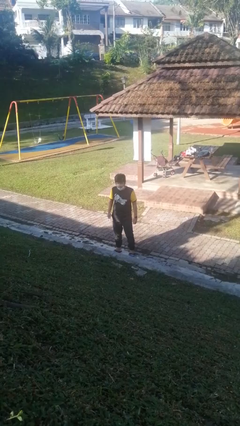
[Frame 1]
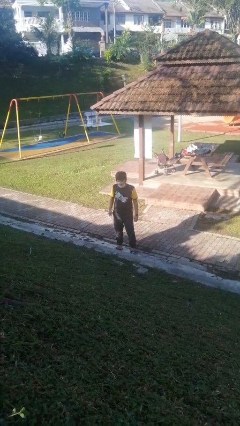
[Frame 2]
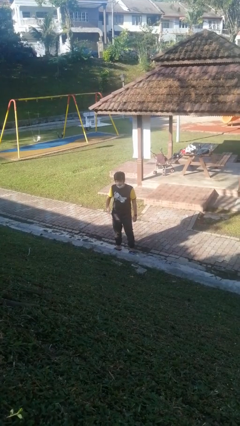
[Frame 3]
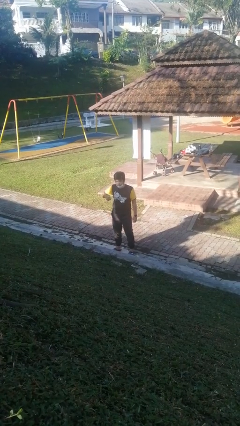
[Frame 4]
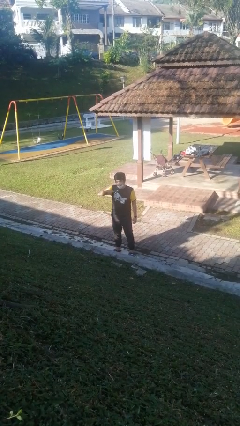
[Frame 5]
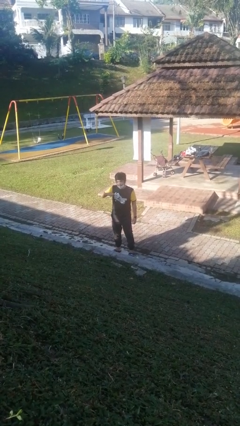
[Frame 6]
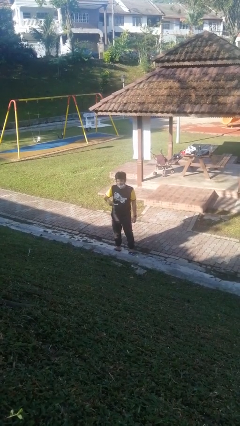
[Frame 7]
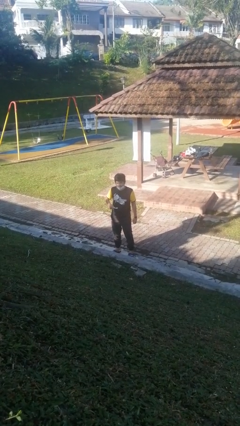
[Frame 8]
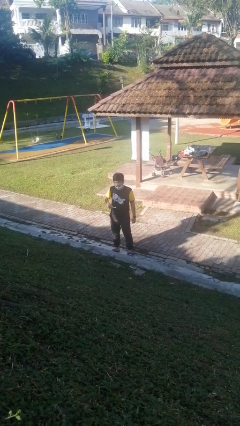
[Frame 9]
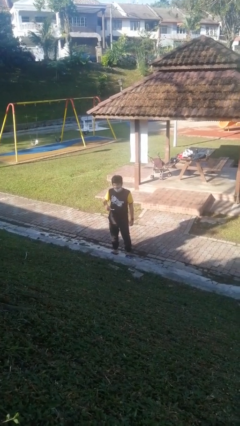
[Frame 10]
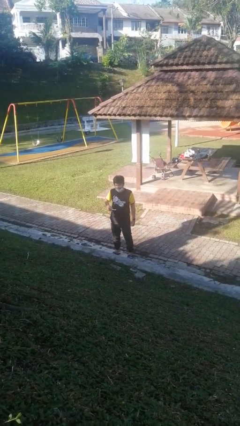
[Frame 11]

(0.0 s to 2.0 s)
person brushes teeth

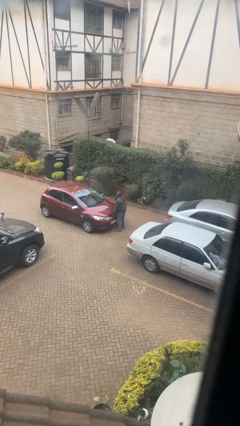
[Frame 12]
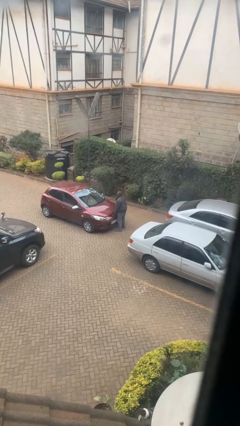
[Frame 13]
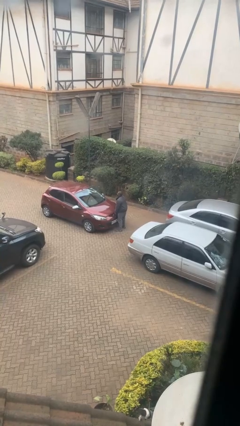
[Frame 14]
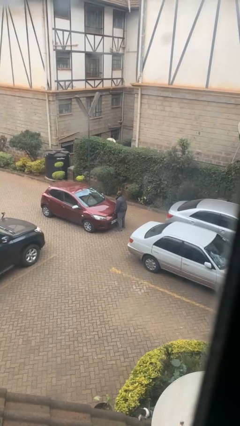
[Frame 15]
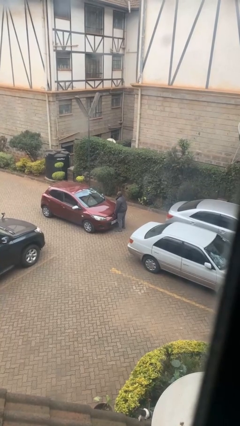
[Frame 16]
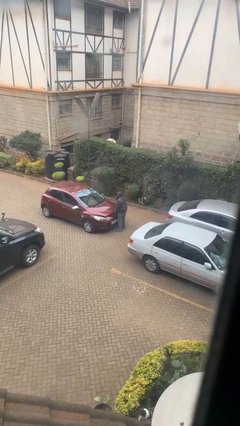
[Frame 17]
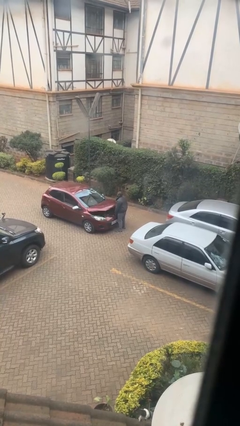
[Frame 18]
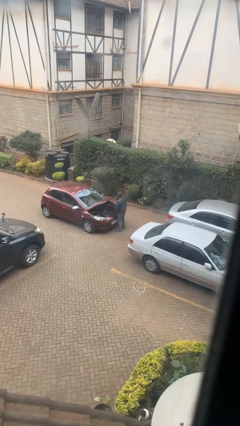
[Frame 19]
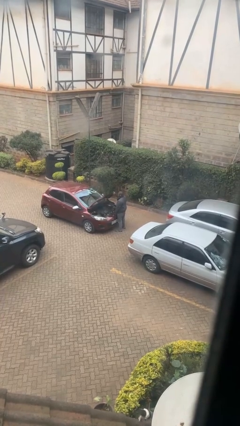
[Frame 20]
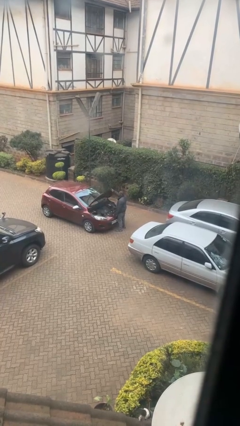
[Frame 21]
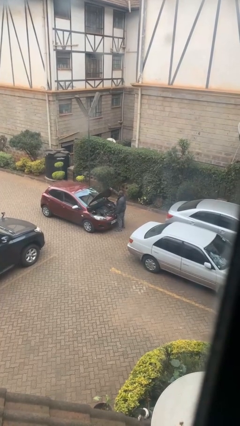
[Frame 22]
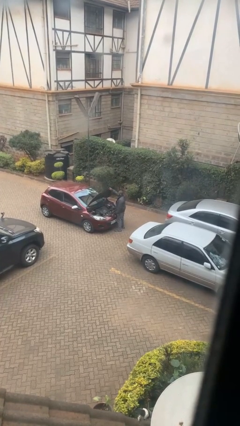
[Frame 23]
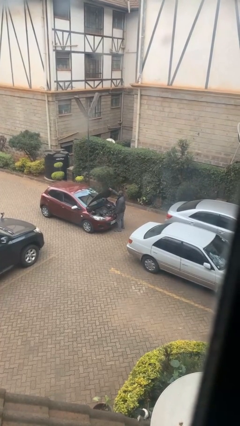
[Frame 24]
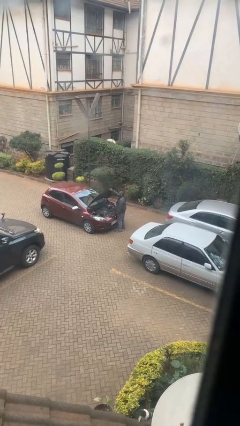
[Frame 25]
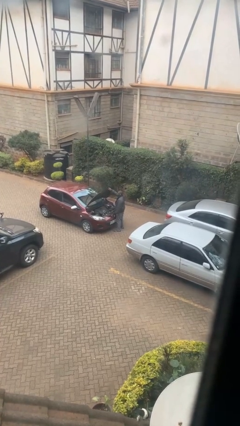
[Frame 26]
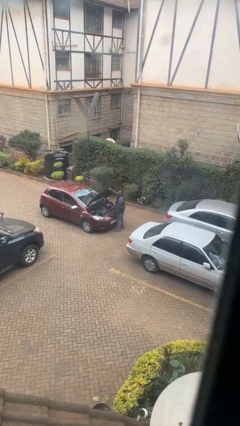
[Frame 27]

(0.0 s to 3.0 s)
person opens car hood

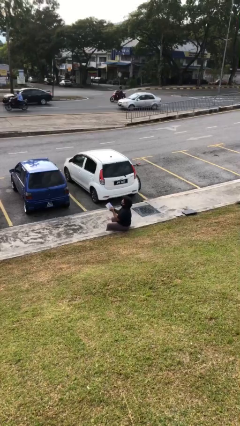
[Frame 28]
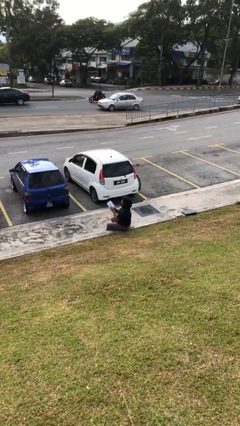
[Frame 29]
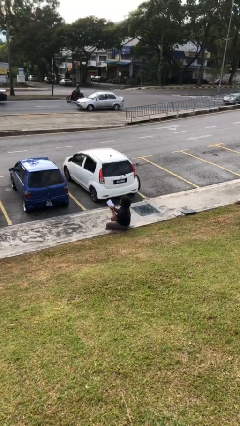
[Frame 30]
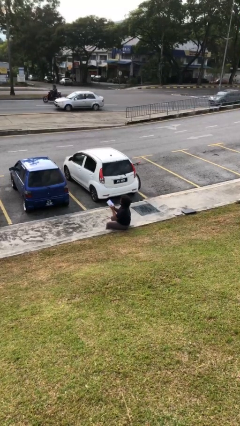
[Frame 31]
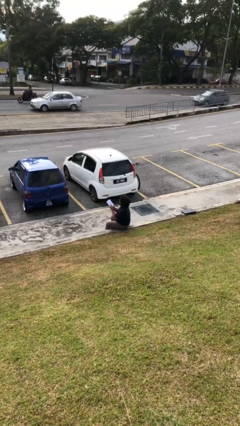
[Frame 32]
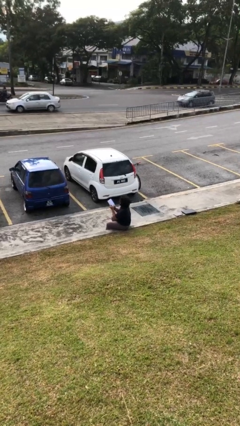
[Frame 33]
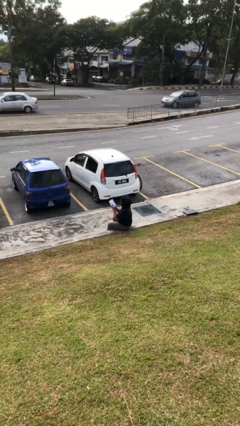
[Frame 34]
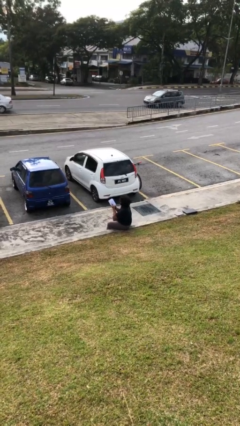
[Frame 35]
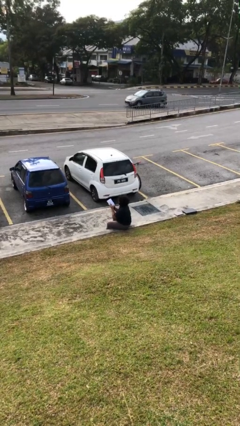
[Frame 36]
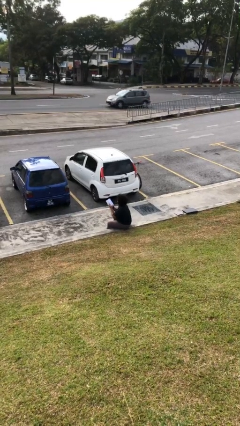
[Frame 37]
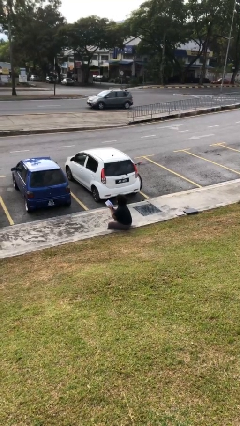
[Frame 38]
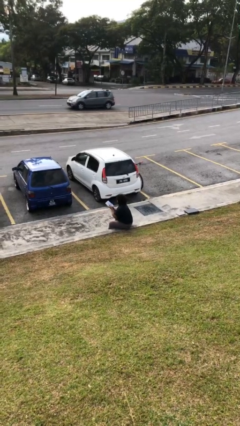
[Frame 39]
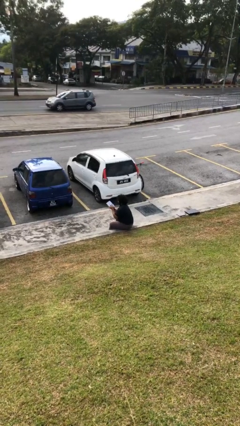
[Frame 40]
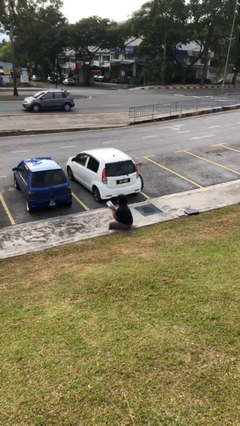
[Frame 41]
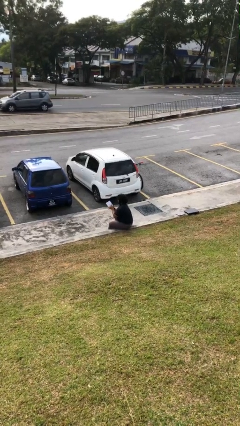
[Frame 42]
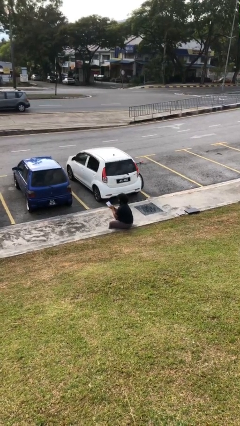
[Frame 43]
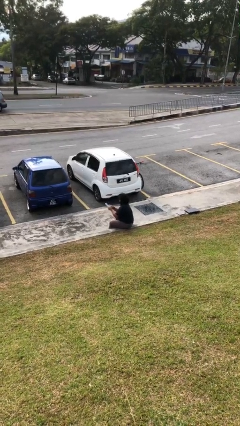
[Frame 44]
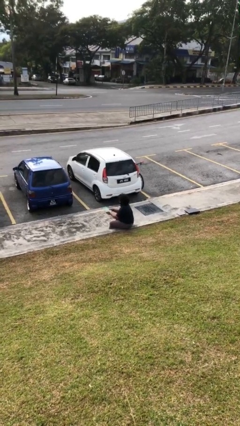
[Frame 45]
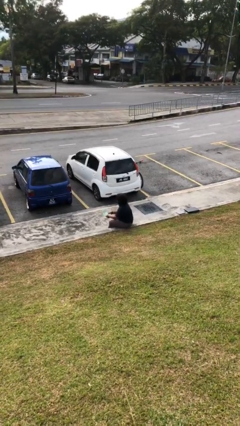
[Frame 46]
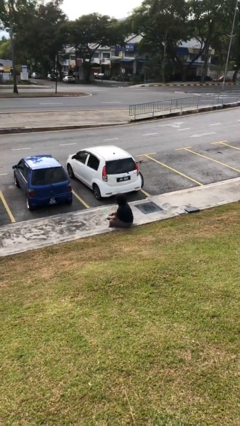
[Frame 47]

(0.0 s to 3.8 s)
person reads document

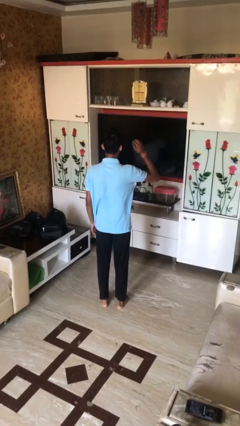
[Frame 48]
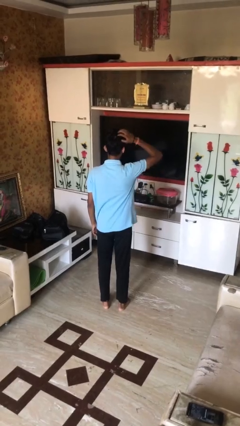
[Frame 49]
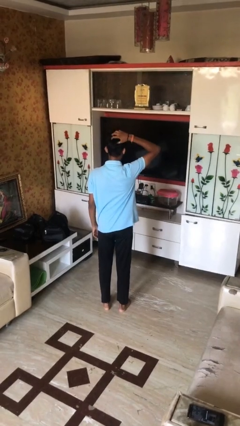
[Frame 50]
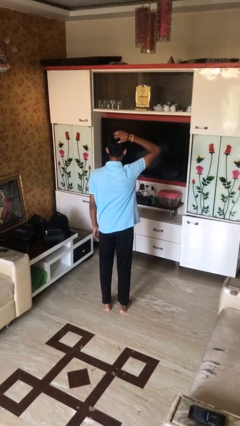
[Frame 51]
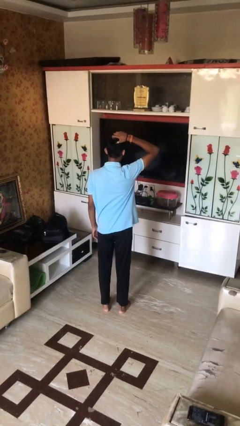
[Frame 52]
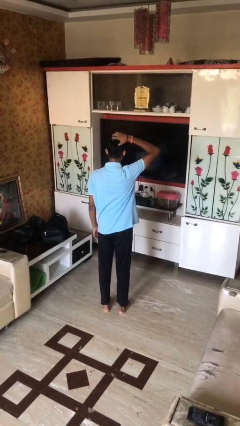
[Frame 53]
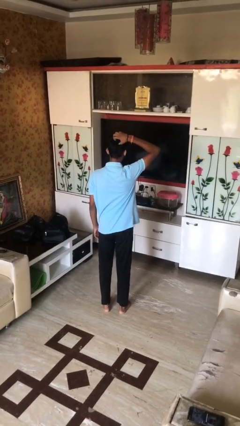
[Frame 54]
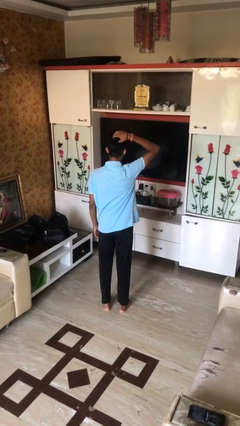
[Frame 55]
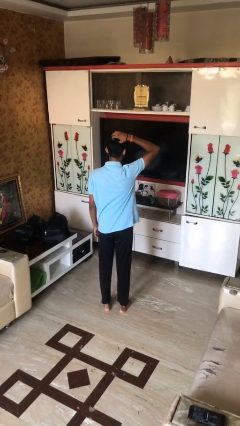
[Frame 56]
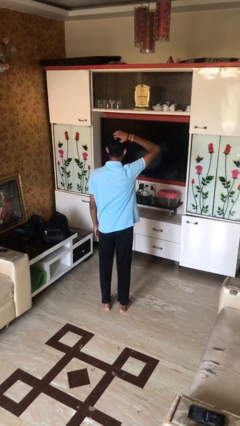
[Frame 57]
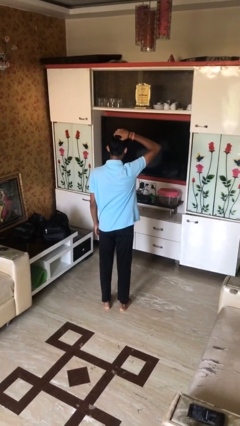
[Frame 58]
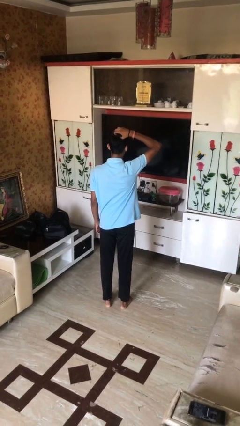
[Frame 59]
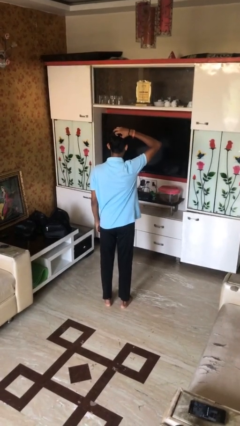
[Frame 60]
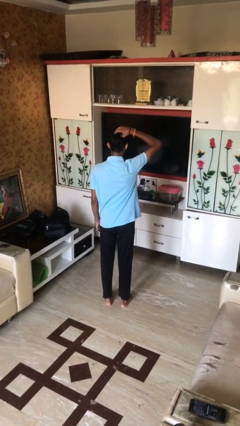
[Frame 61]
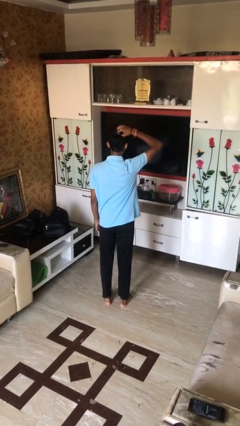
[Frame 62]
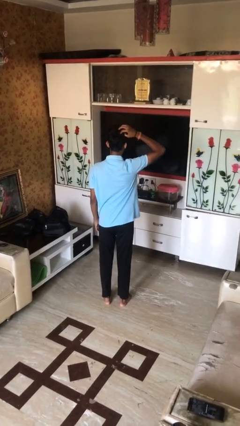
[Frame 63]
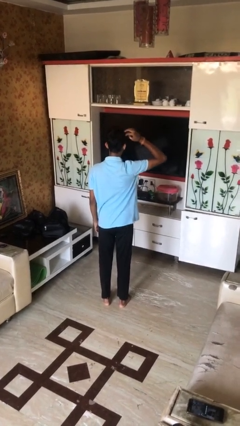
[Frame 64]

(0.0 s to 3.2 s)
person scratches face

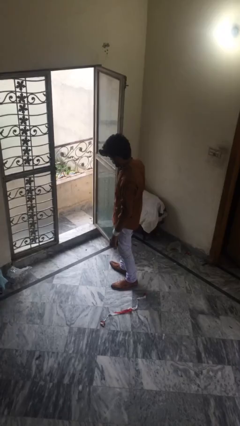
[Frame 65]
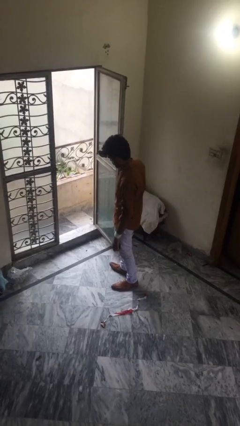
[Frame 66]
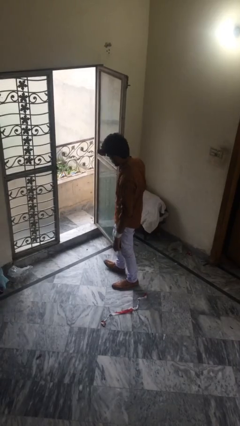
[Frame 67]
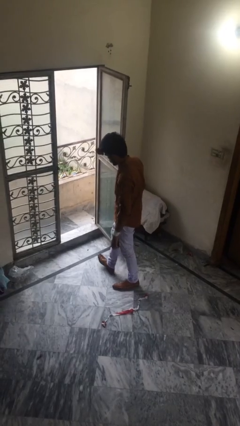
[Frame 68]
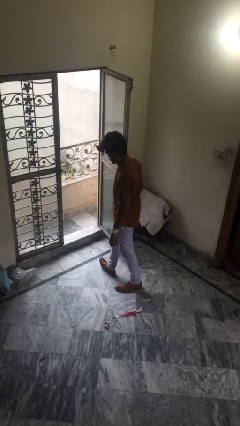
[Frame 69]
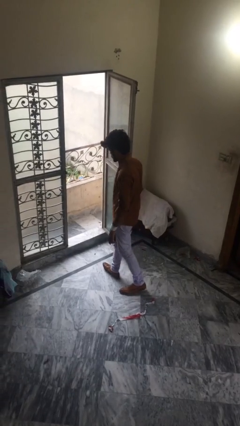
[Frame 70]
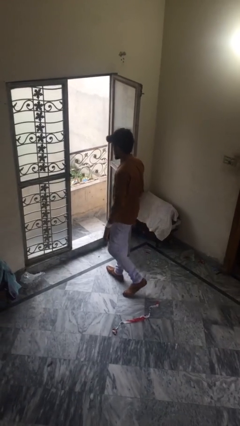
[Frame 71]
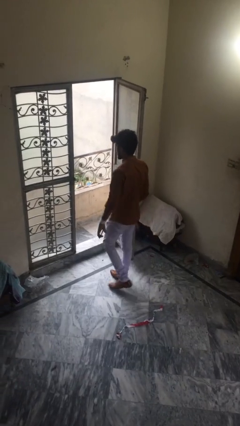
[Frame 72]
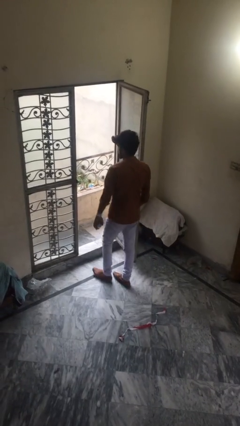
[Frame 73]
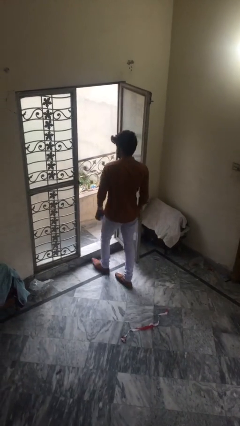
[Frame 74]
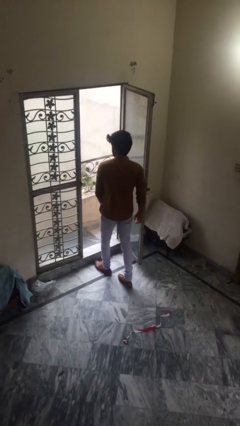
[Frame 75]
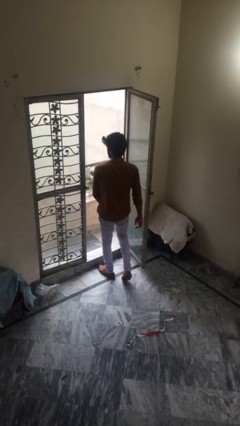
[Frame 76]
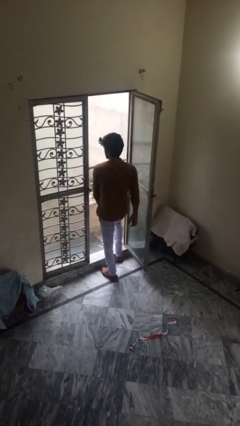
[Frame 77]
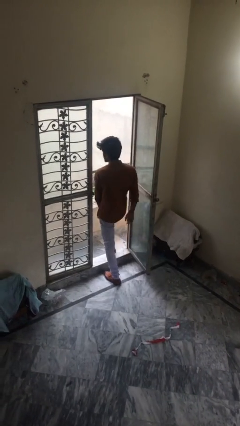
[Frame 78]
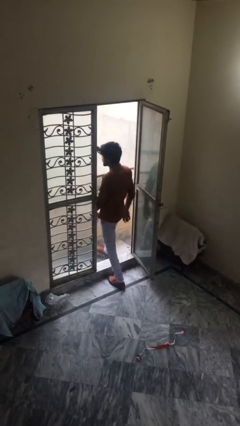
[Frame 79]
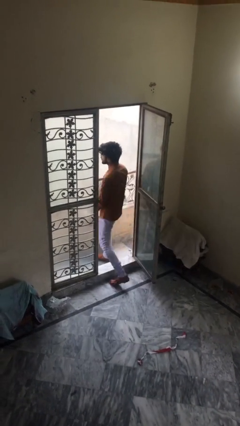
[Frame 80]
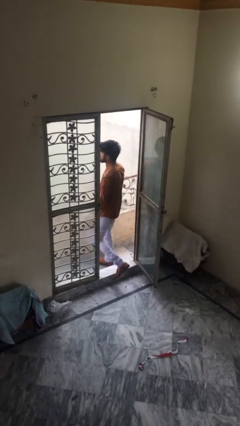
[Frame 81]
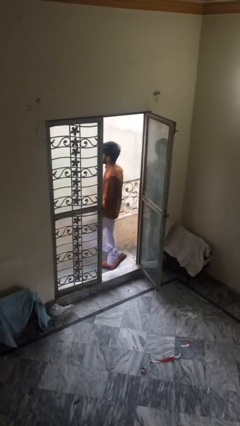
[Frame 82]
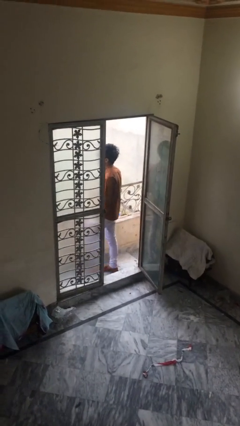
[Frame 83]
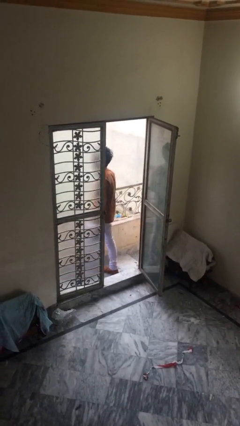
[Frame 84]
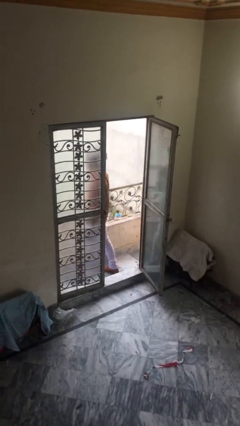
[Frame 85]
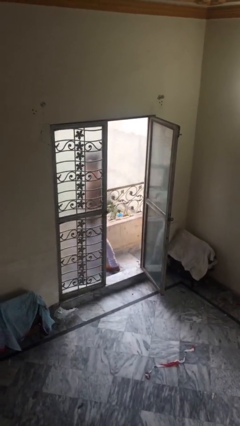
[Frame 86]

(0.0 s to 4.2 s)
person exits scene through structure

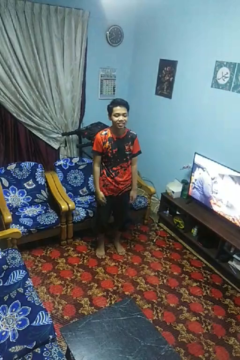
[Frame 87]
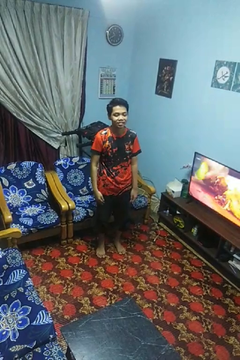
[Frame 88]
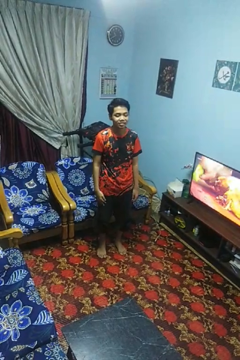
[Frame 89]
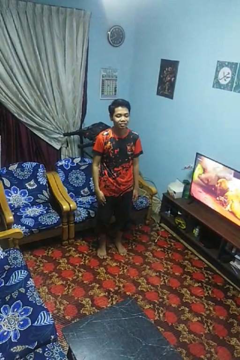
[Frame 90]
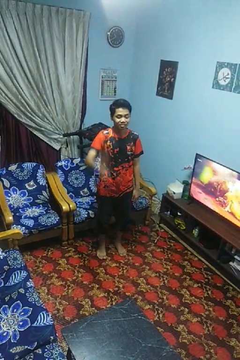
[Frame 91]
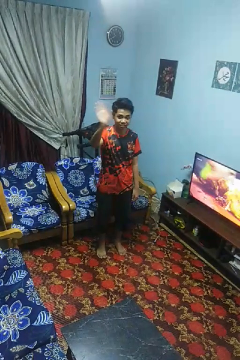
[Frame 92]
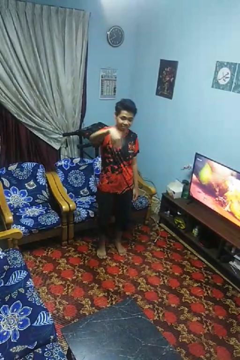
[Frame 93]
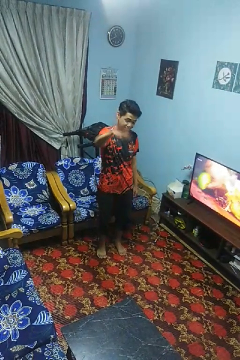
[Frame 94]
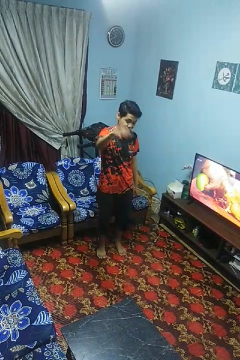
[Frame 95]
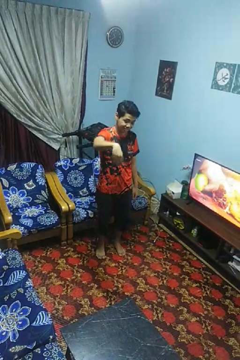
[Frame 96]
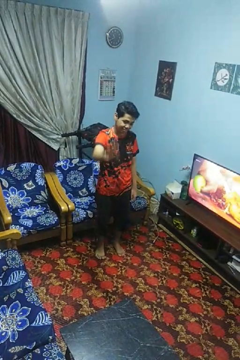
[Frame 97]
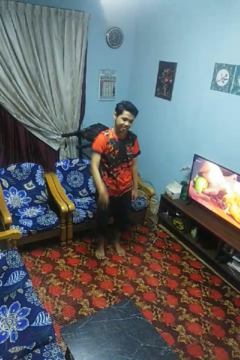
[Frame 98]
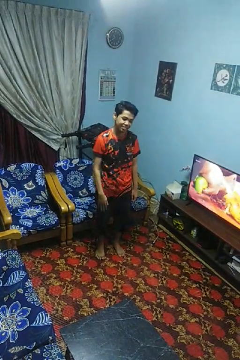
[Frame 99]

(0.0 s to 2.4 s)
person gestures come here
